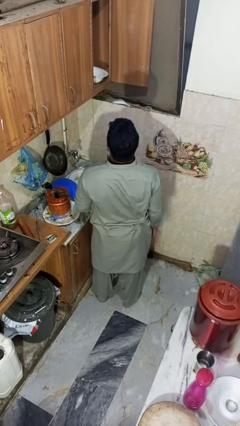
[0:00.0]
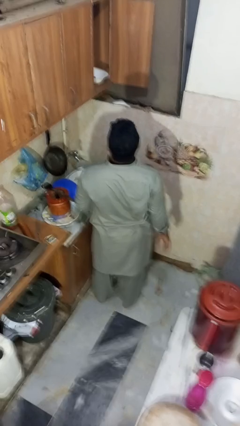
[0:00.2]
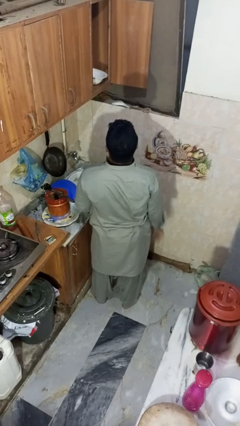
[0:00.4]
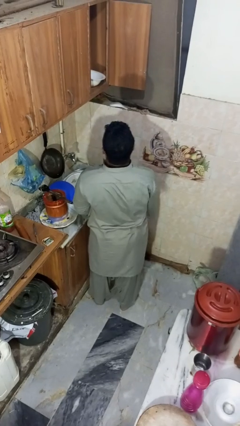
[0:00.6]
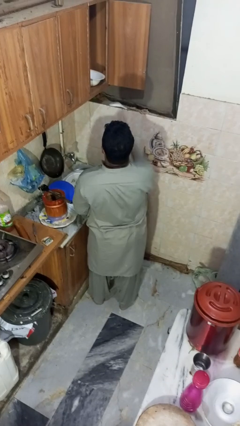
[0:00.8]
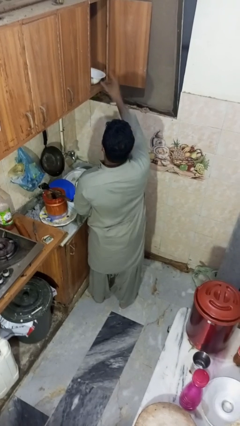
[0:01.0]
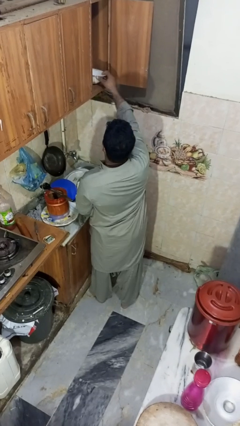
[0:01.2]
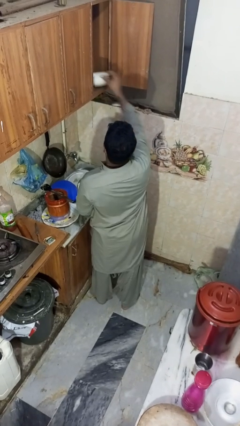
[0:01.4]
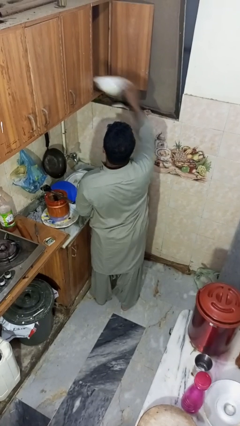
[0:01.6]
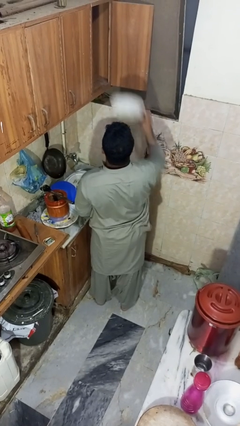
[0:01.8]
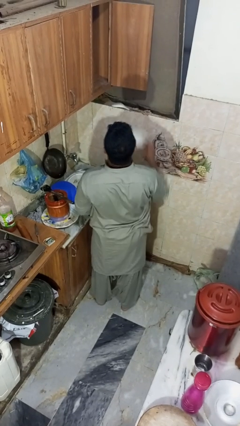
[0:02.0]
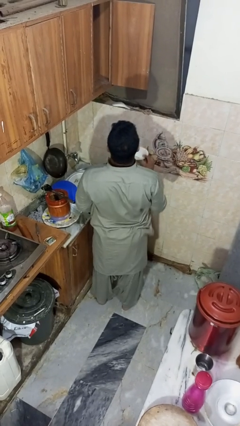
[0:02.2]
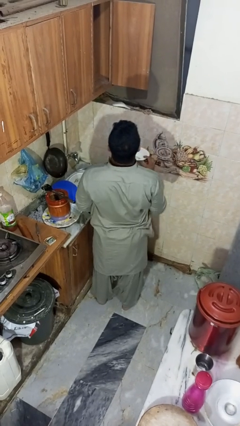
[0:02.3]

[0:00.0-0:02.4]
person takes object from cabinet

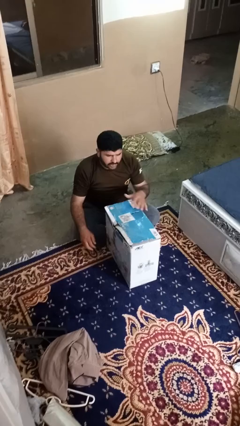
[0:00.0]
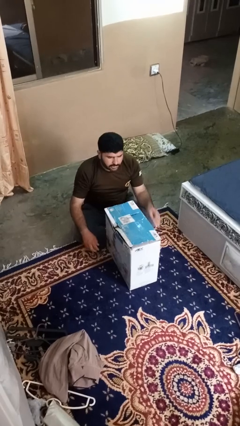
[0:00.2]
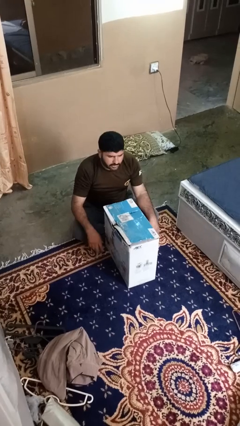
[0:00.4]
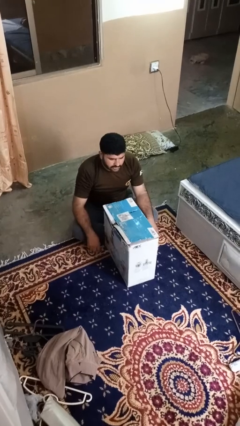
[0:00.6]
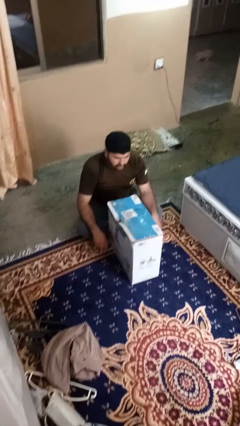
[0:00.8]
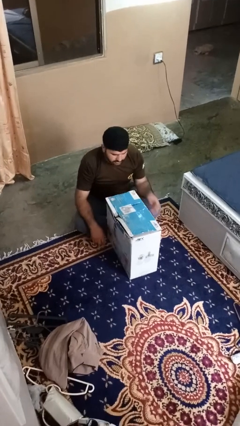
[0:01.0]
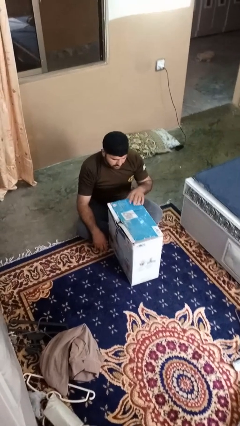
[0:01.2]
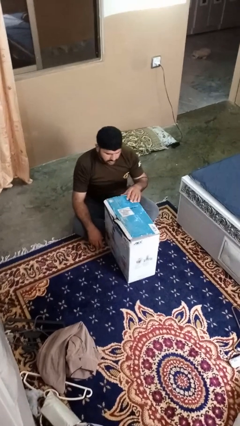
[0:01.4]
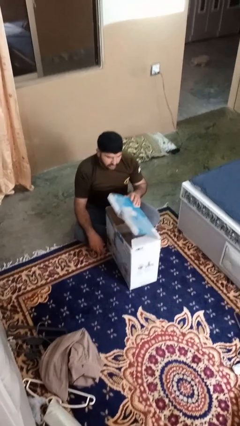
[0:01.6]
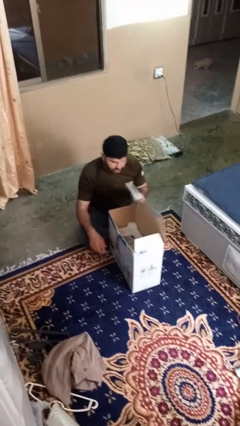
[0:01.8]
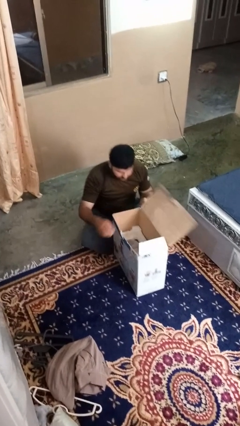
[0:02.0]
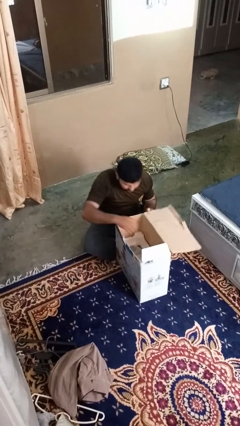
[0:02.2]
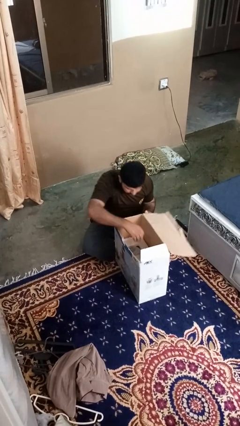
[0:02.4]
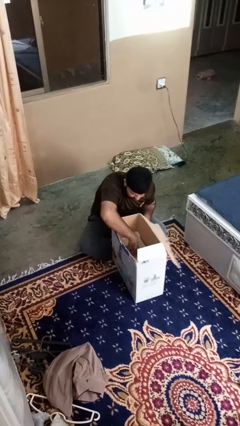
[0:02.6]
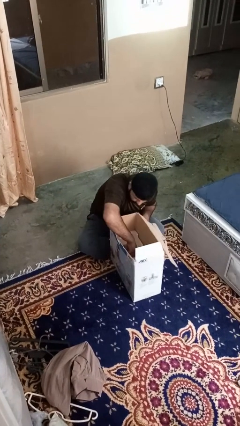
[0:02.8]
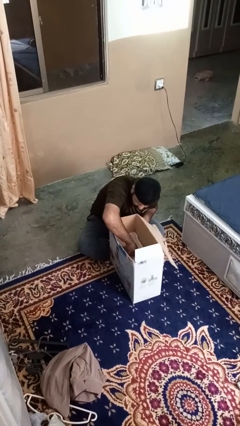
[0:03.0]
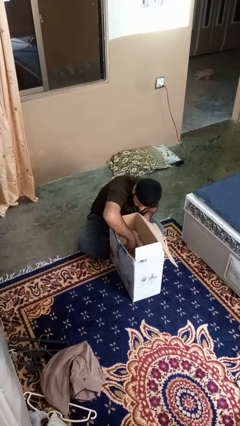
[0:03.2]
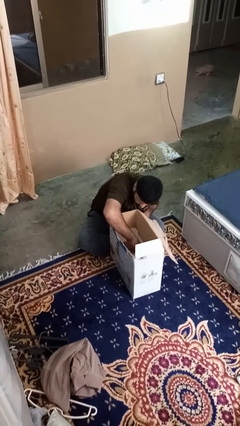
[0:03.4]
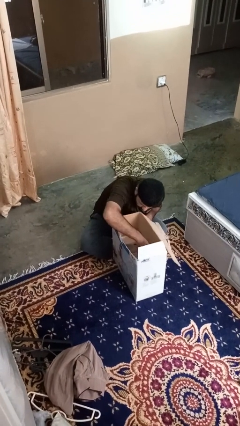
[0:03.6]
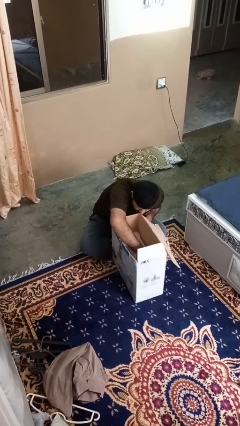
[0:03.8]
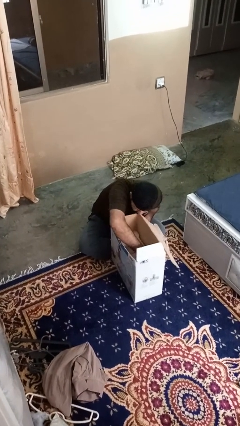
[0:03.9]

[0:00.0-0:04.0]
person searches in box

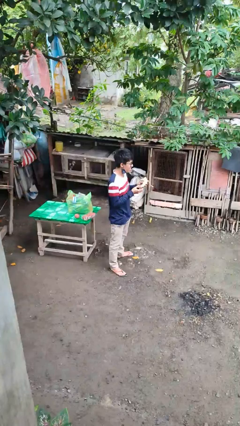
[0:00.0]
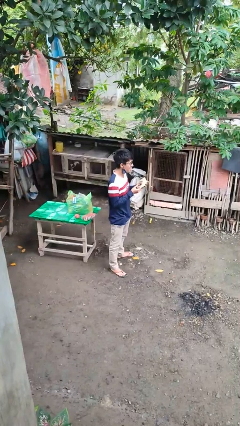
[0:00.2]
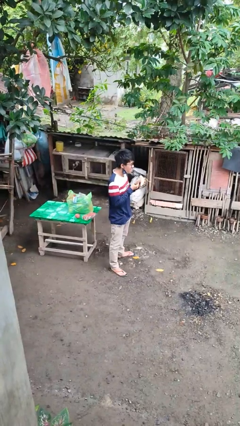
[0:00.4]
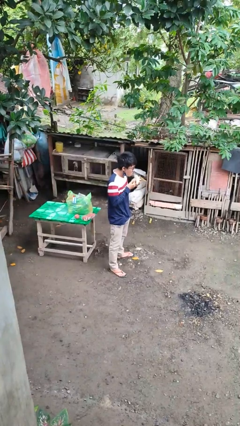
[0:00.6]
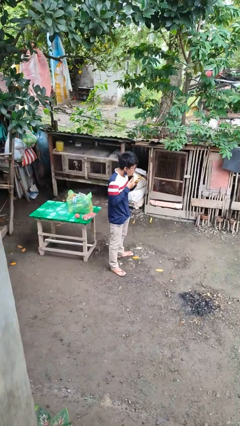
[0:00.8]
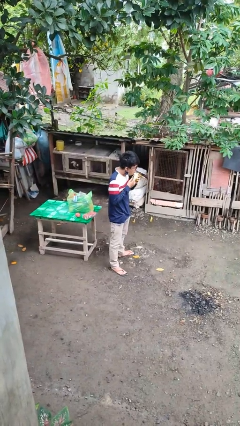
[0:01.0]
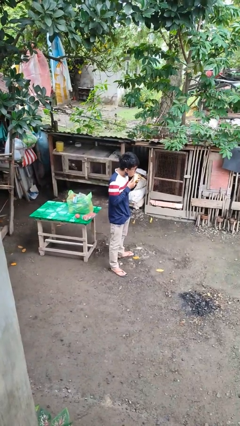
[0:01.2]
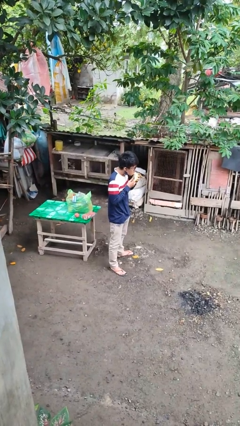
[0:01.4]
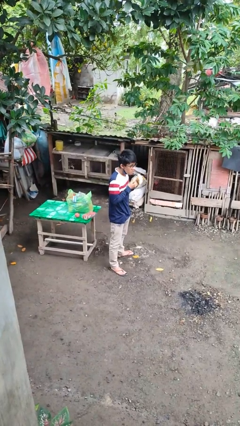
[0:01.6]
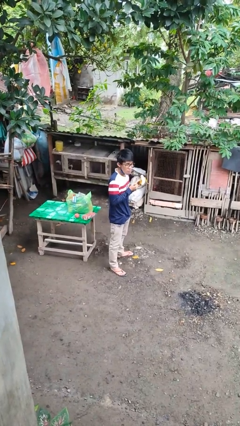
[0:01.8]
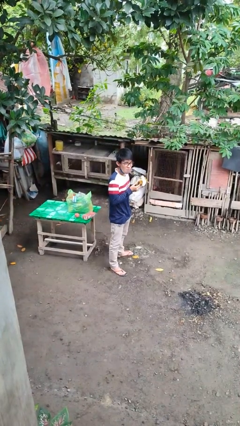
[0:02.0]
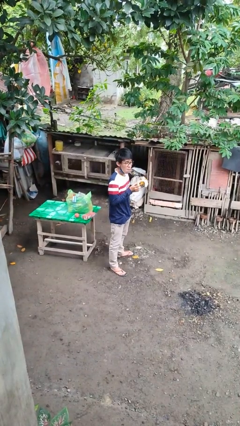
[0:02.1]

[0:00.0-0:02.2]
person eats banana

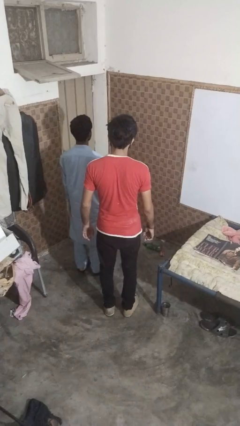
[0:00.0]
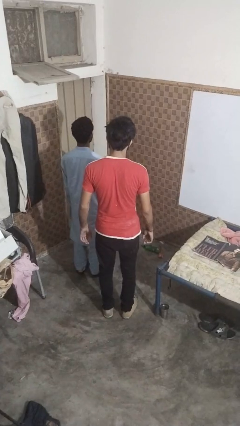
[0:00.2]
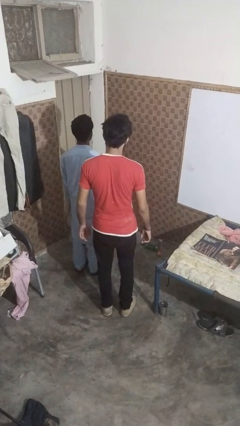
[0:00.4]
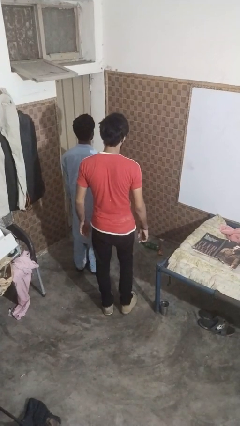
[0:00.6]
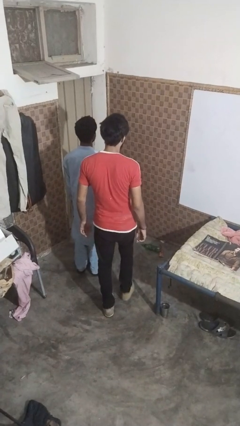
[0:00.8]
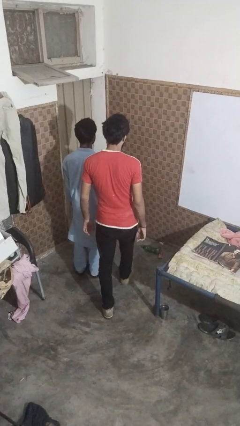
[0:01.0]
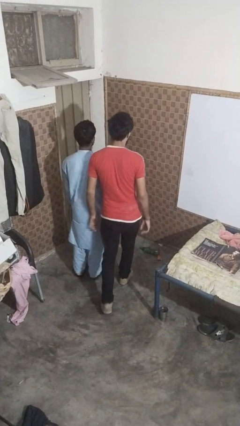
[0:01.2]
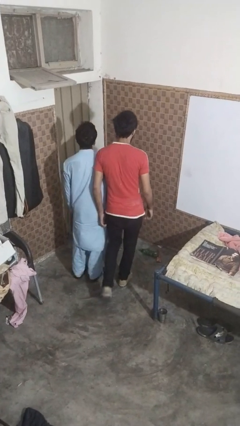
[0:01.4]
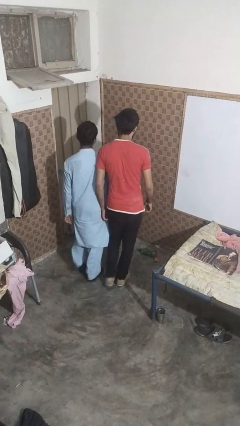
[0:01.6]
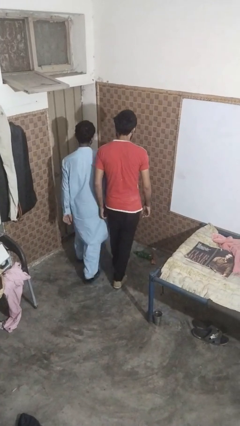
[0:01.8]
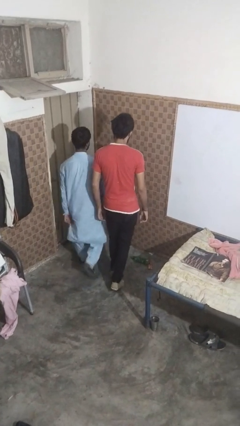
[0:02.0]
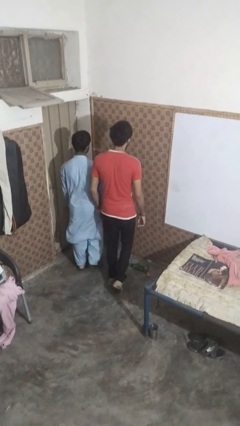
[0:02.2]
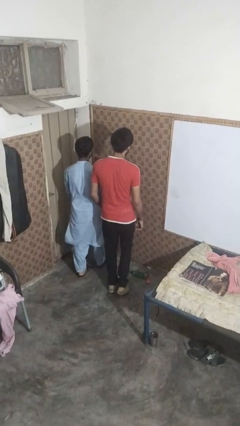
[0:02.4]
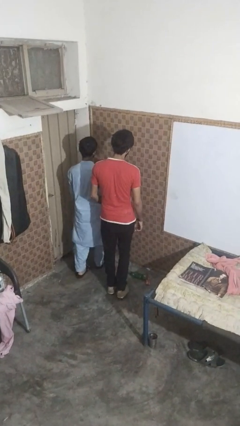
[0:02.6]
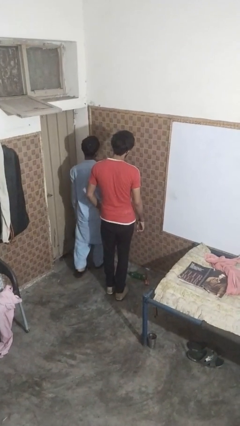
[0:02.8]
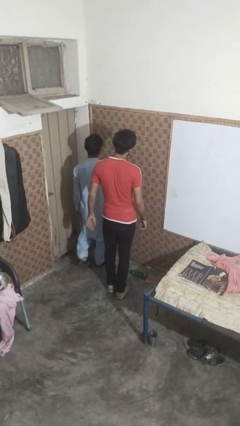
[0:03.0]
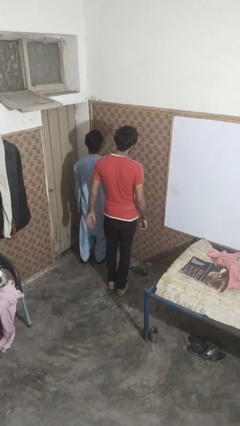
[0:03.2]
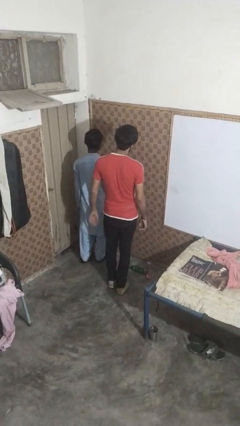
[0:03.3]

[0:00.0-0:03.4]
person bumps into person

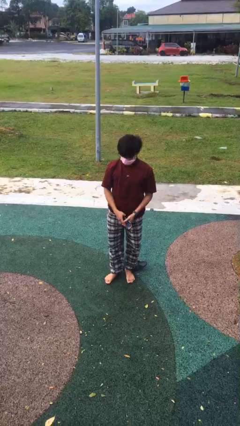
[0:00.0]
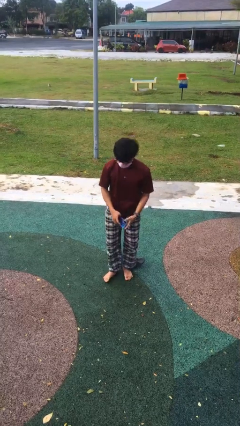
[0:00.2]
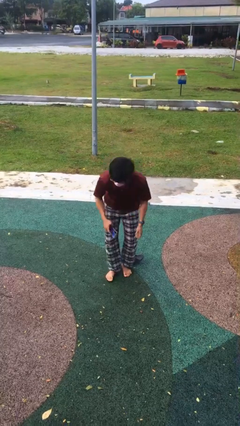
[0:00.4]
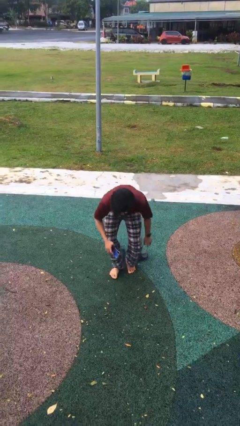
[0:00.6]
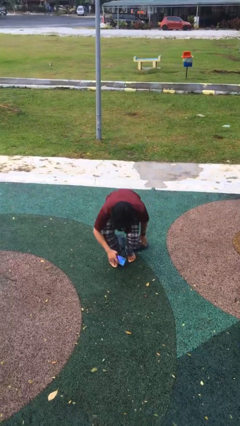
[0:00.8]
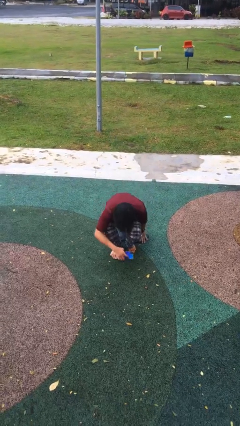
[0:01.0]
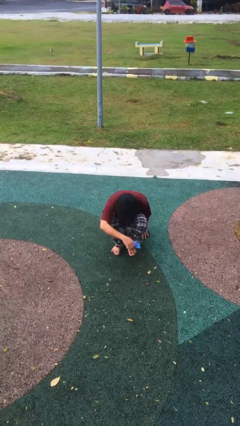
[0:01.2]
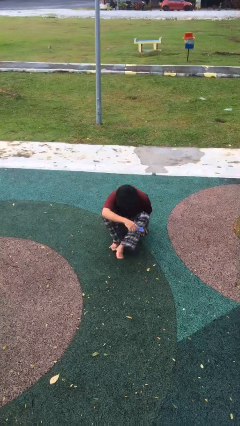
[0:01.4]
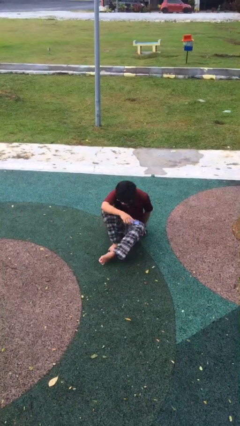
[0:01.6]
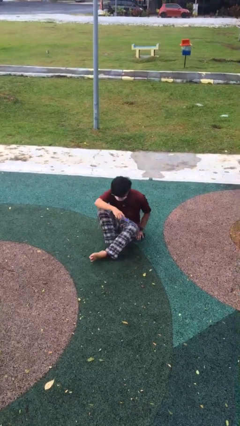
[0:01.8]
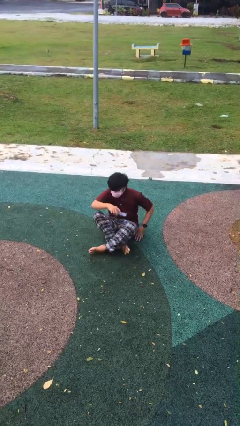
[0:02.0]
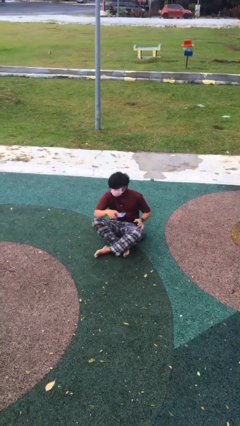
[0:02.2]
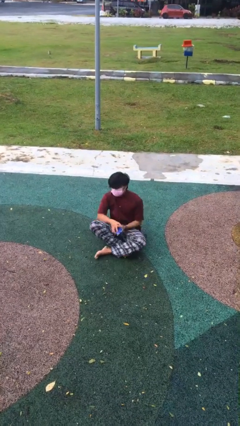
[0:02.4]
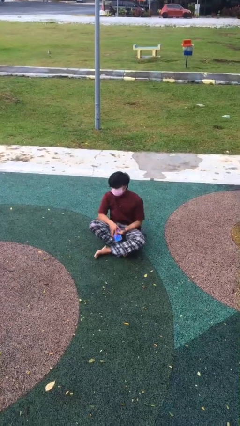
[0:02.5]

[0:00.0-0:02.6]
person sits crisscross

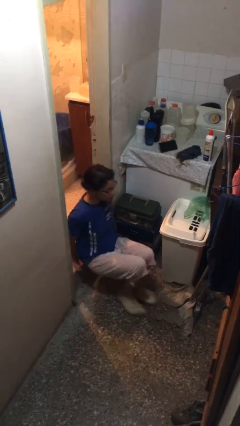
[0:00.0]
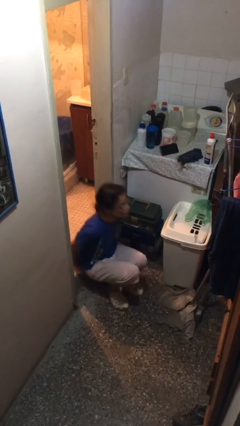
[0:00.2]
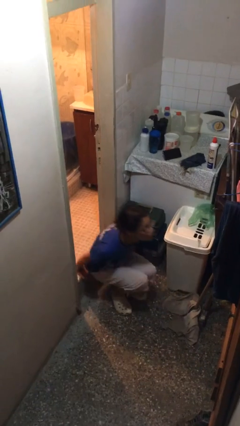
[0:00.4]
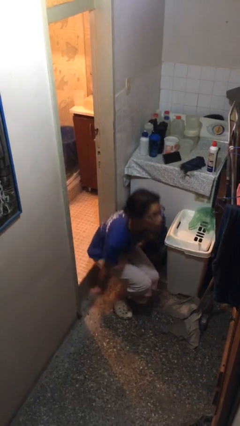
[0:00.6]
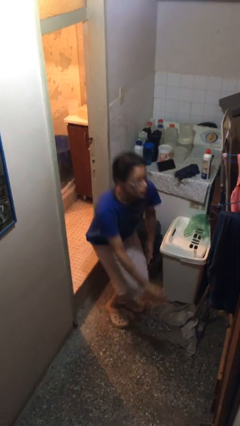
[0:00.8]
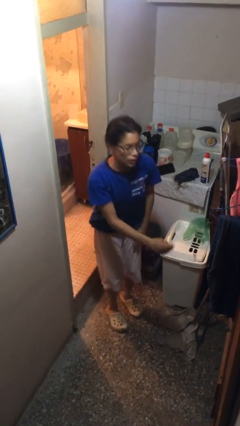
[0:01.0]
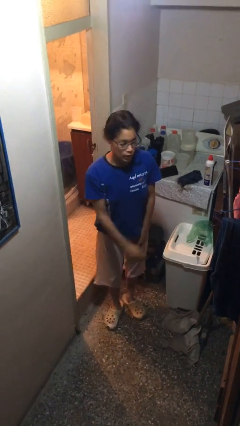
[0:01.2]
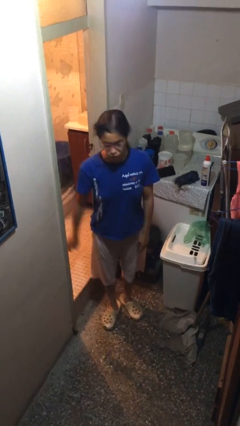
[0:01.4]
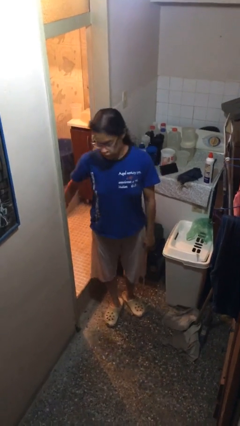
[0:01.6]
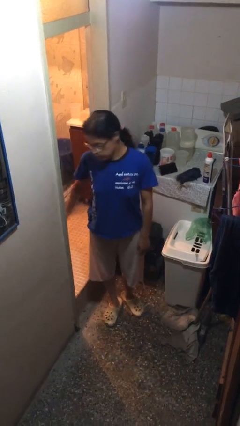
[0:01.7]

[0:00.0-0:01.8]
person stands up

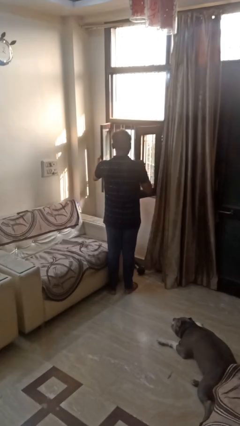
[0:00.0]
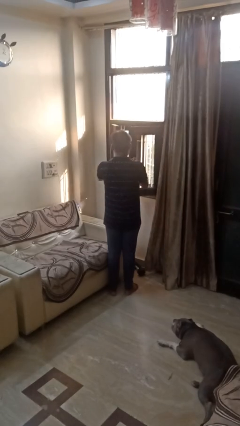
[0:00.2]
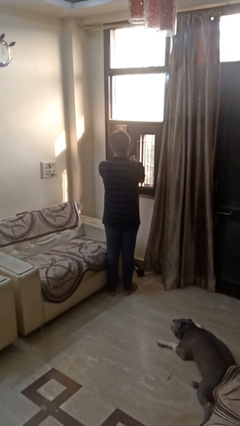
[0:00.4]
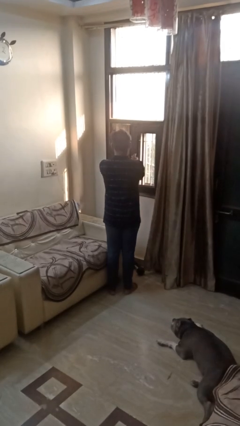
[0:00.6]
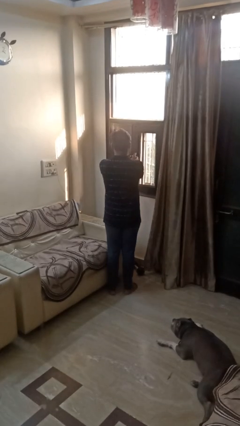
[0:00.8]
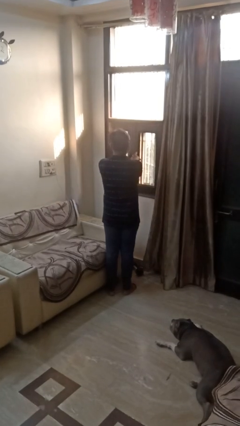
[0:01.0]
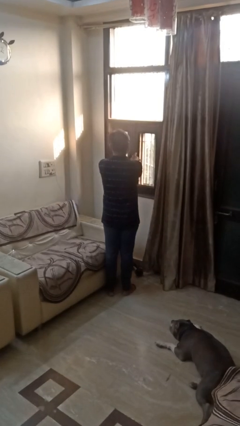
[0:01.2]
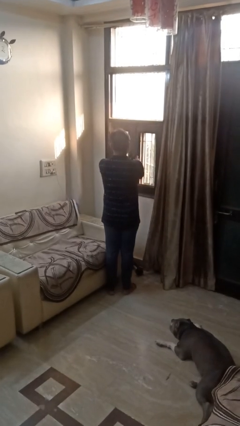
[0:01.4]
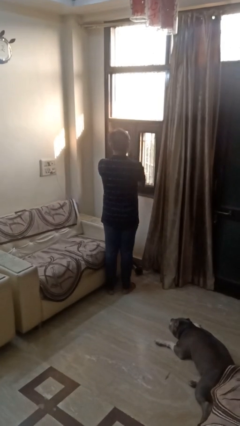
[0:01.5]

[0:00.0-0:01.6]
person closes home window
